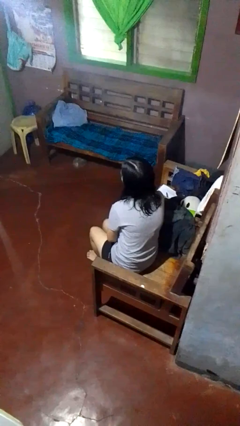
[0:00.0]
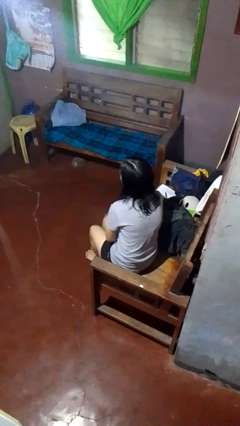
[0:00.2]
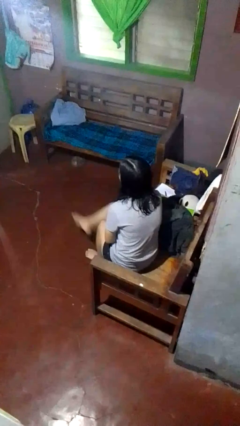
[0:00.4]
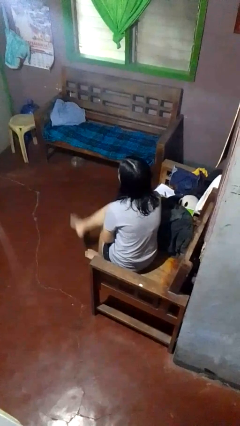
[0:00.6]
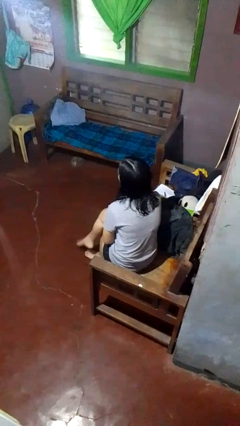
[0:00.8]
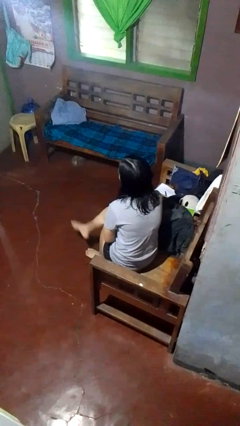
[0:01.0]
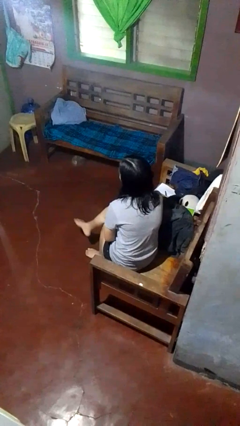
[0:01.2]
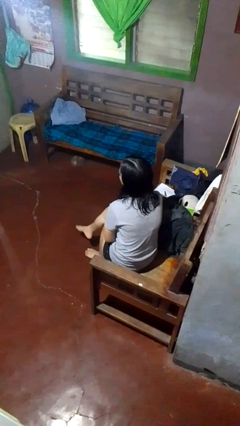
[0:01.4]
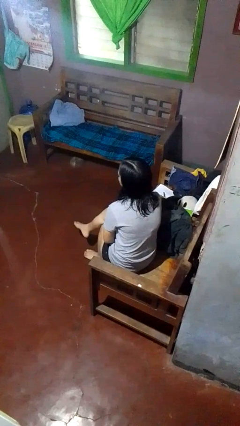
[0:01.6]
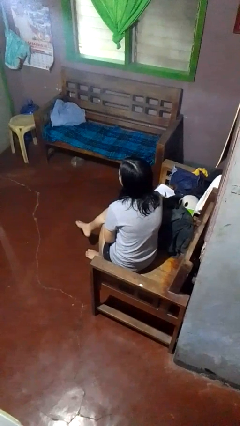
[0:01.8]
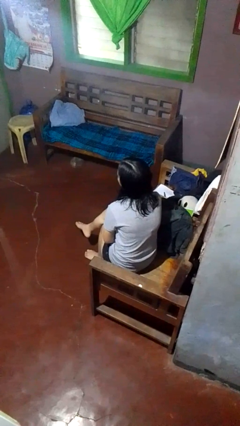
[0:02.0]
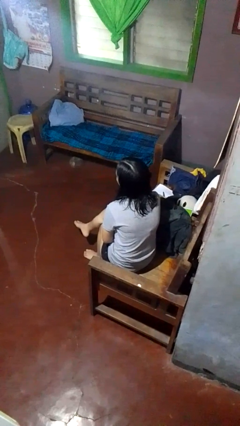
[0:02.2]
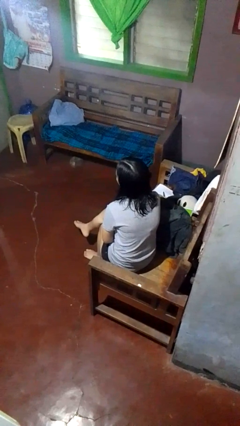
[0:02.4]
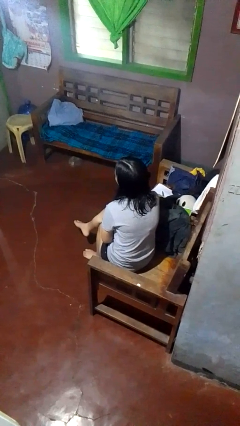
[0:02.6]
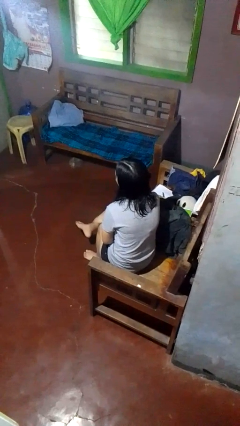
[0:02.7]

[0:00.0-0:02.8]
person crosses legs

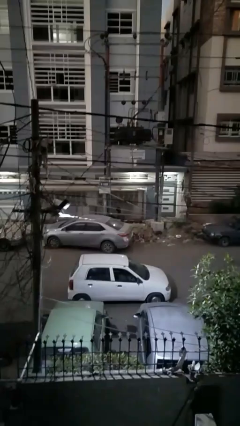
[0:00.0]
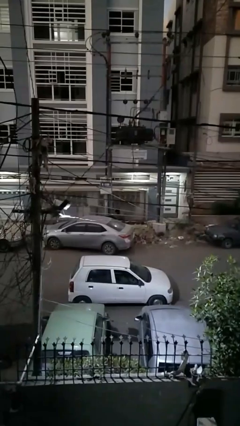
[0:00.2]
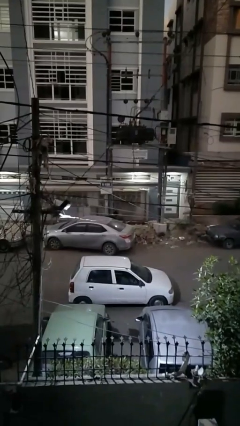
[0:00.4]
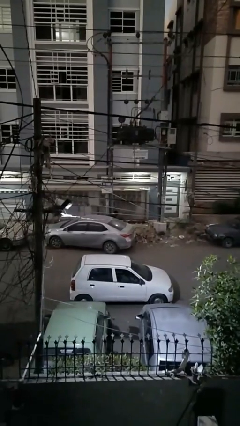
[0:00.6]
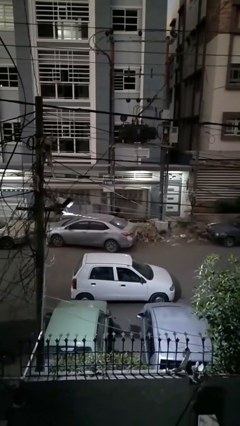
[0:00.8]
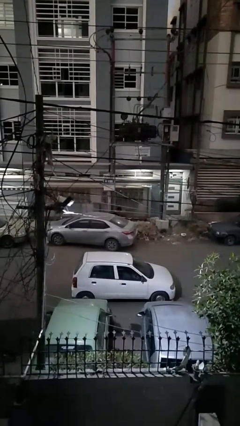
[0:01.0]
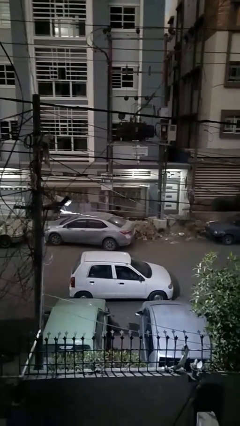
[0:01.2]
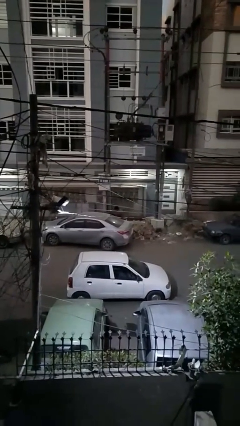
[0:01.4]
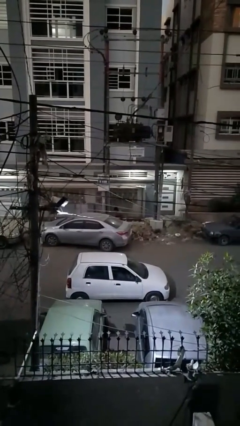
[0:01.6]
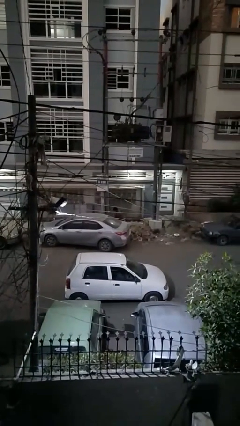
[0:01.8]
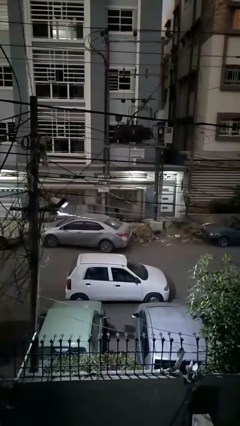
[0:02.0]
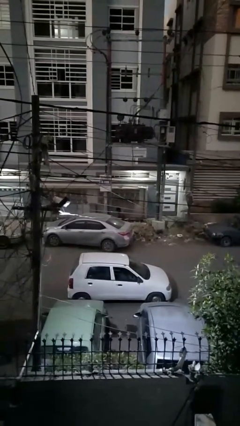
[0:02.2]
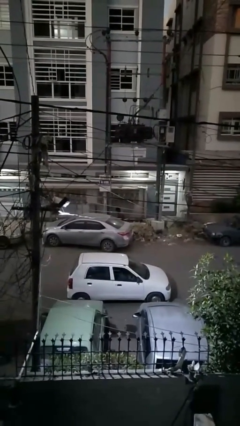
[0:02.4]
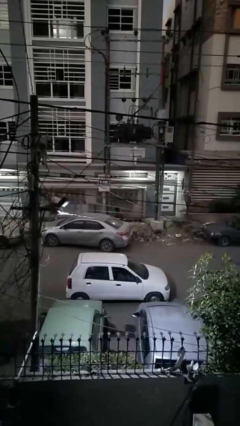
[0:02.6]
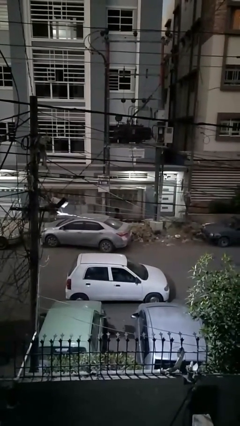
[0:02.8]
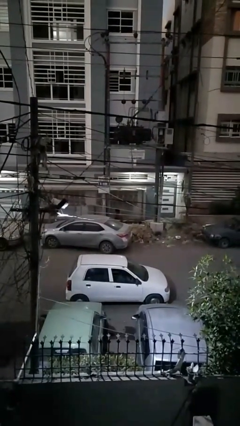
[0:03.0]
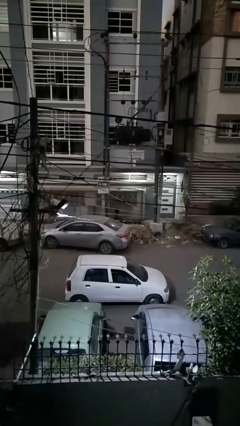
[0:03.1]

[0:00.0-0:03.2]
person unloads car

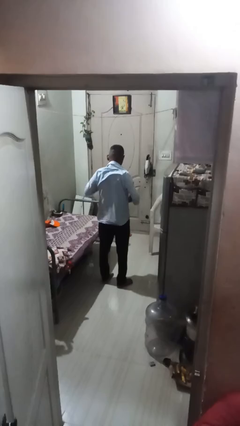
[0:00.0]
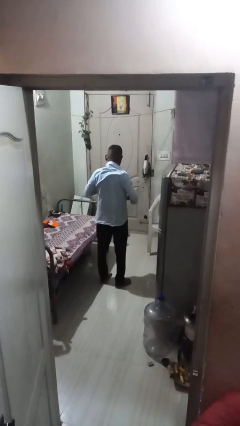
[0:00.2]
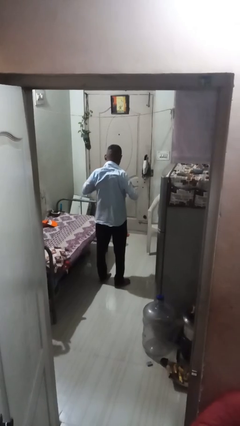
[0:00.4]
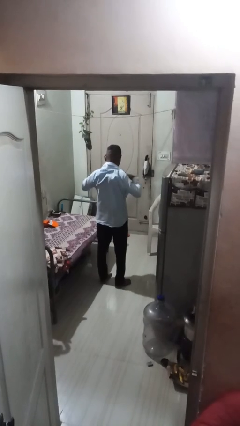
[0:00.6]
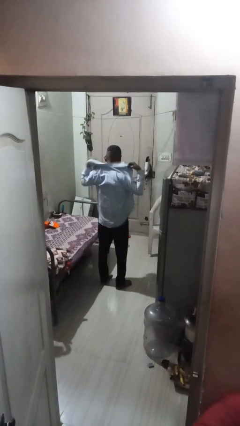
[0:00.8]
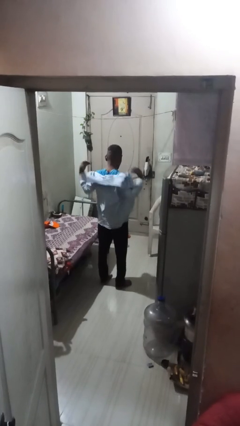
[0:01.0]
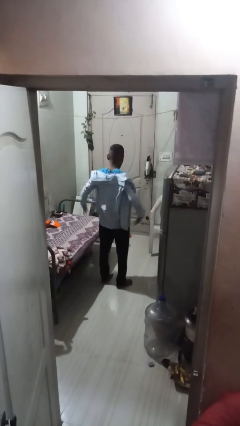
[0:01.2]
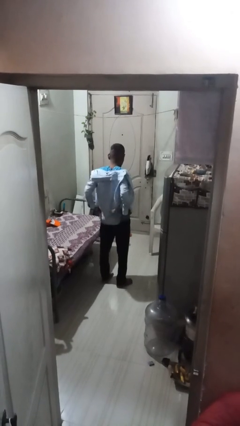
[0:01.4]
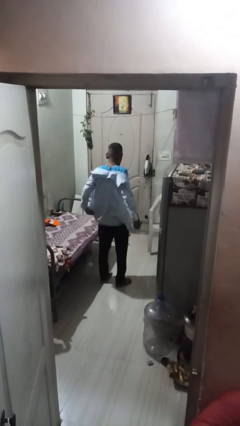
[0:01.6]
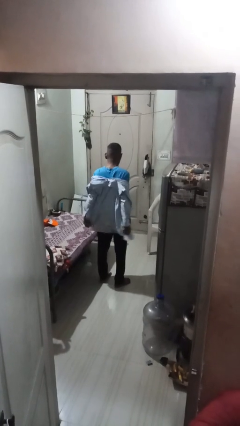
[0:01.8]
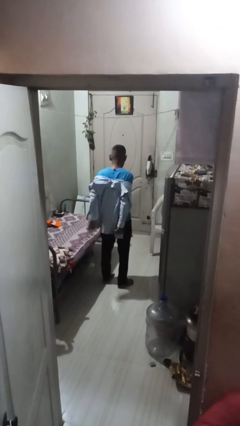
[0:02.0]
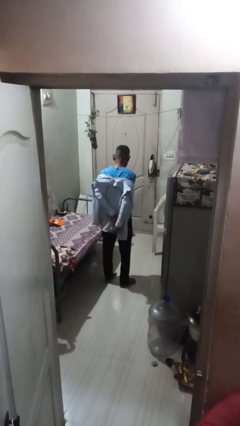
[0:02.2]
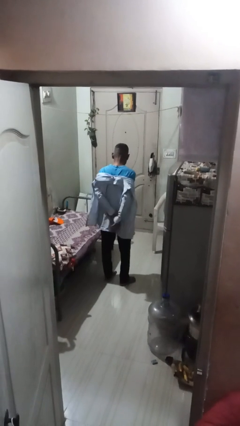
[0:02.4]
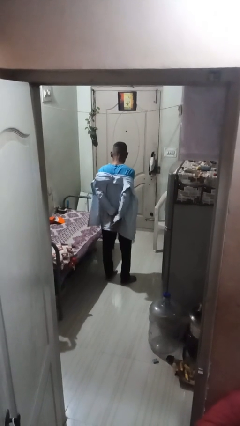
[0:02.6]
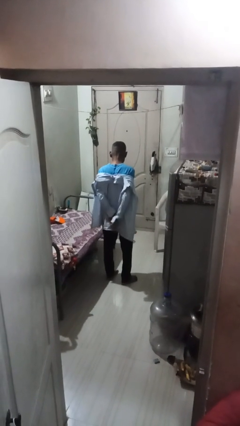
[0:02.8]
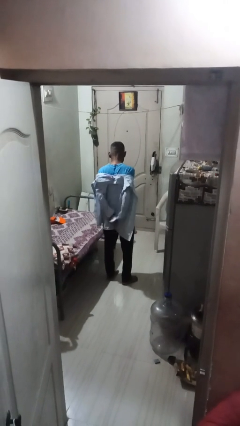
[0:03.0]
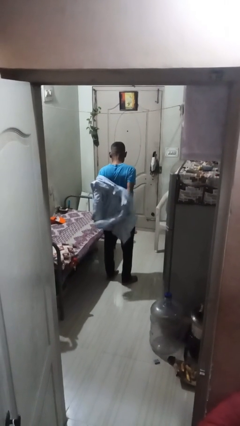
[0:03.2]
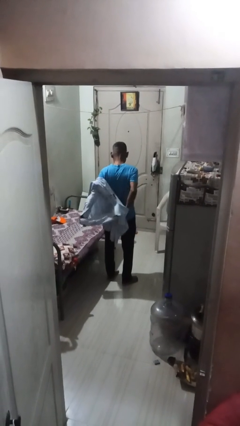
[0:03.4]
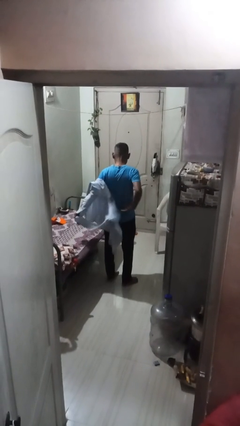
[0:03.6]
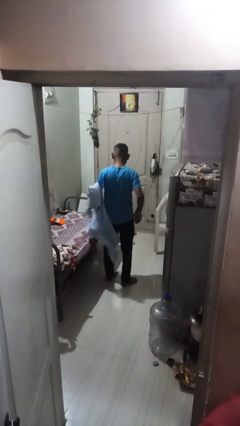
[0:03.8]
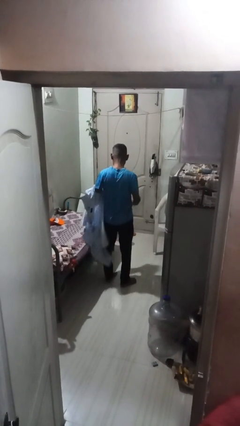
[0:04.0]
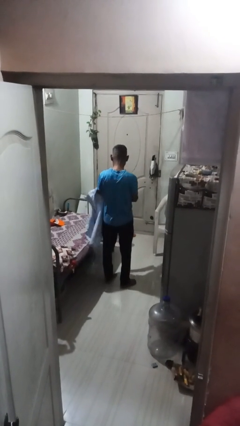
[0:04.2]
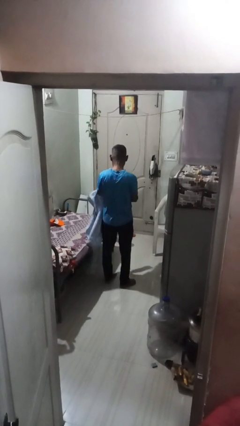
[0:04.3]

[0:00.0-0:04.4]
person takes off shirt

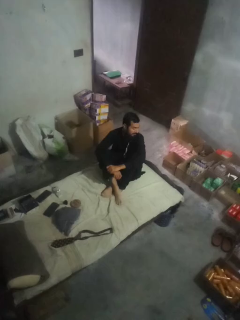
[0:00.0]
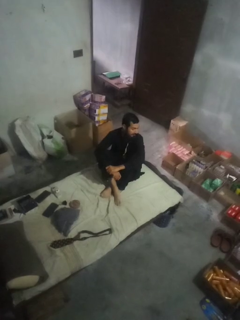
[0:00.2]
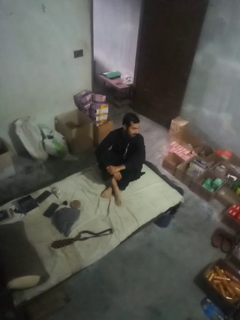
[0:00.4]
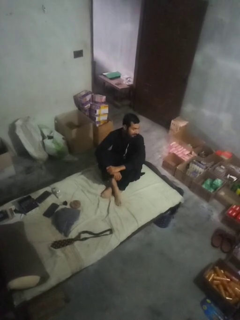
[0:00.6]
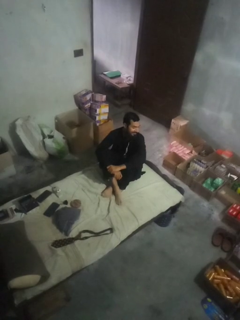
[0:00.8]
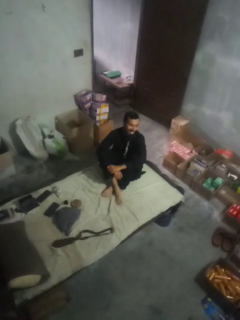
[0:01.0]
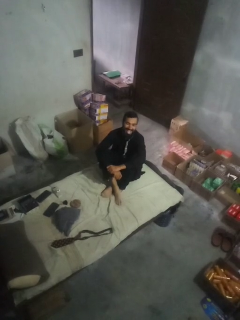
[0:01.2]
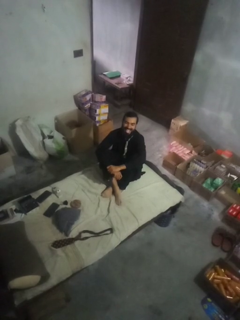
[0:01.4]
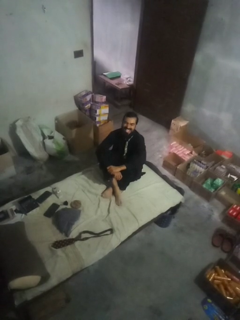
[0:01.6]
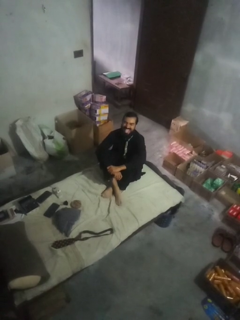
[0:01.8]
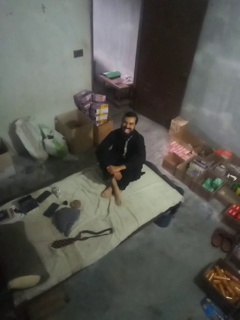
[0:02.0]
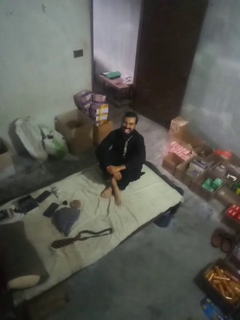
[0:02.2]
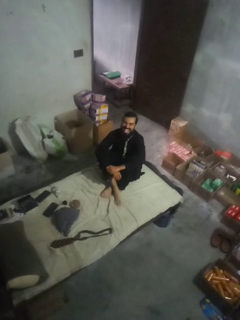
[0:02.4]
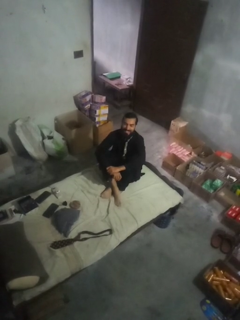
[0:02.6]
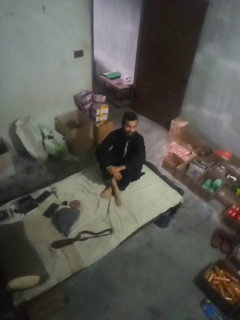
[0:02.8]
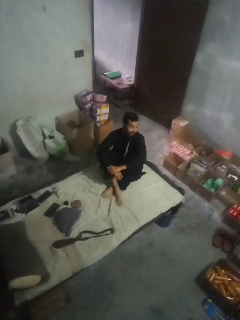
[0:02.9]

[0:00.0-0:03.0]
person sticks out tongue

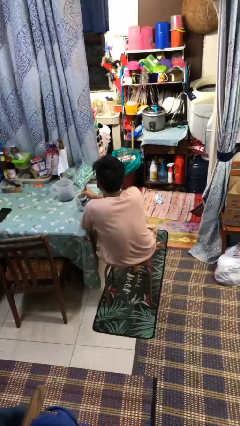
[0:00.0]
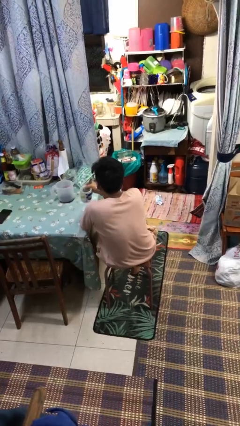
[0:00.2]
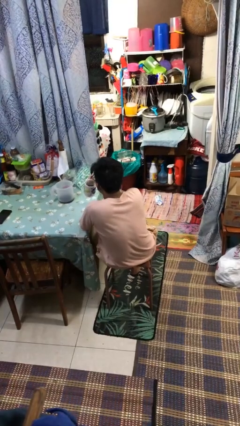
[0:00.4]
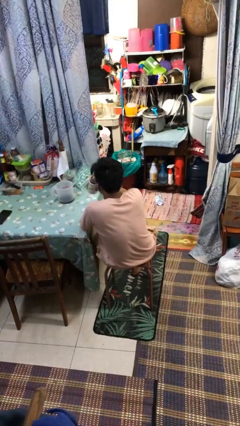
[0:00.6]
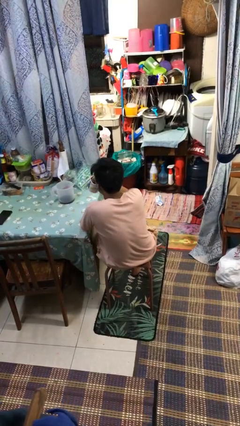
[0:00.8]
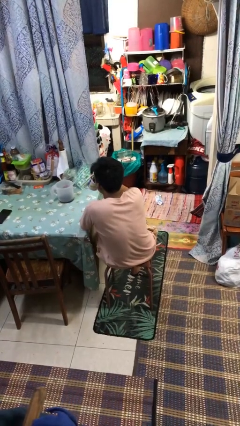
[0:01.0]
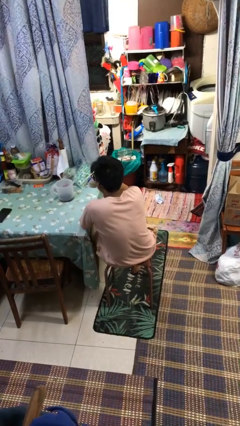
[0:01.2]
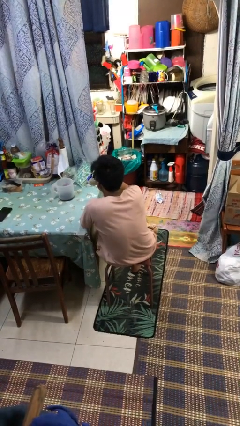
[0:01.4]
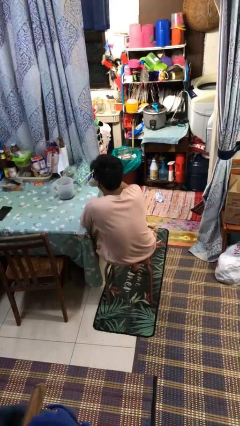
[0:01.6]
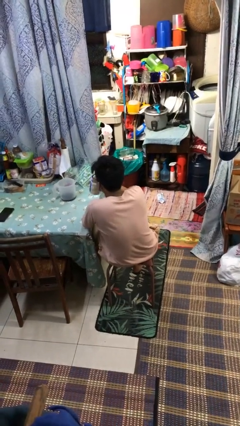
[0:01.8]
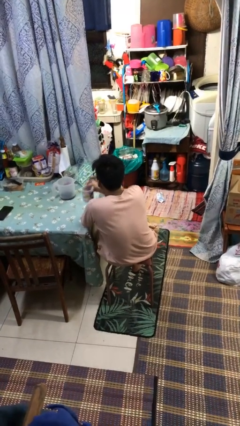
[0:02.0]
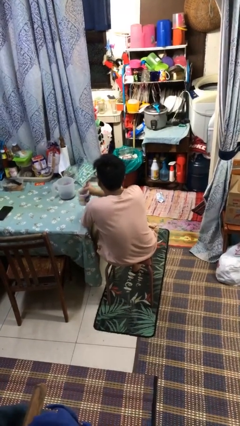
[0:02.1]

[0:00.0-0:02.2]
person drinks from mug

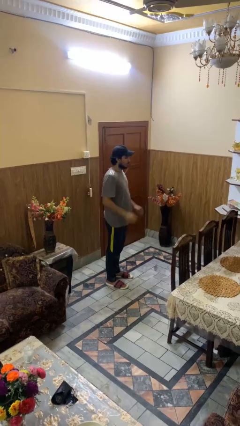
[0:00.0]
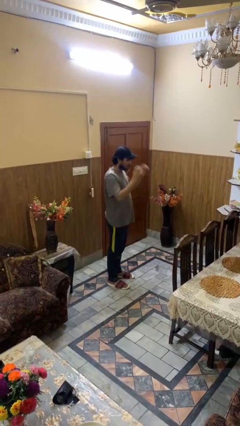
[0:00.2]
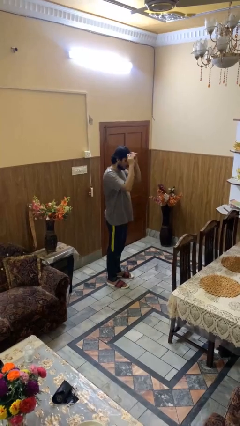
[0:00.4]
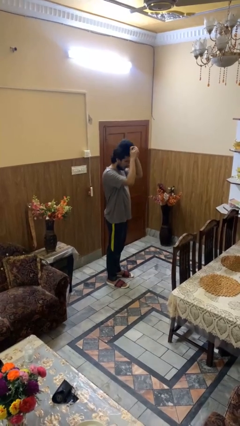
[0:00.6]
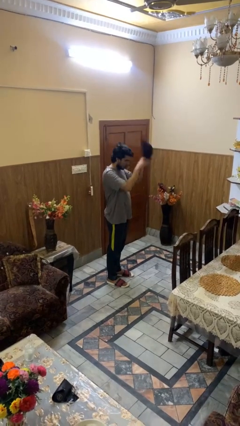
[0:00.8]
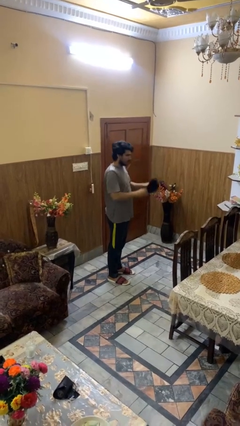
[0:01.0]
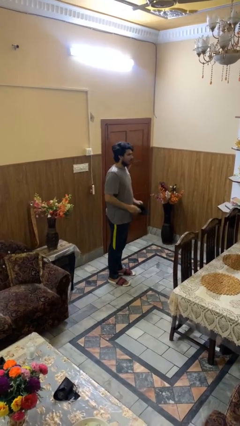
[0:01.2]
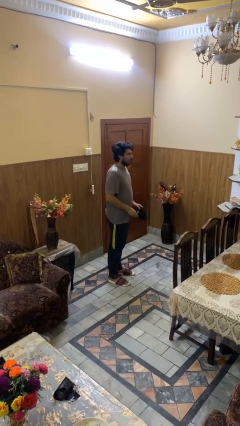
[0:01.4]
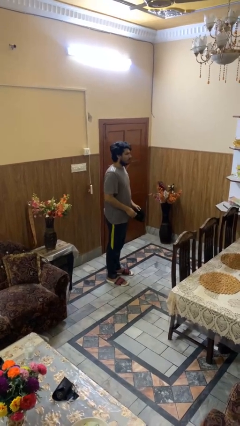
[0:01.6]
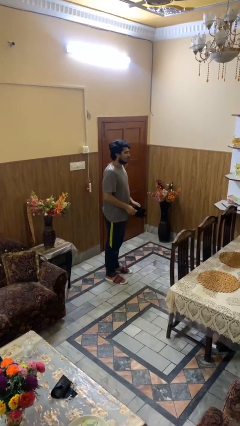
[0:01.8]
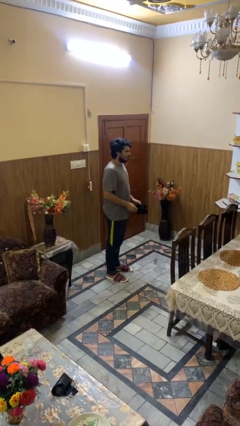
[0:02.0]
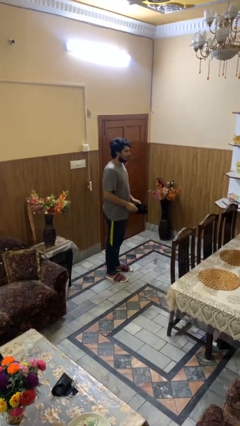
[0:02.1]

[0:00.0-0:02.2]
person takes off hat

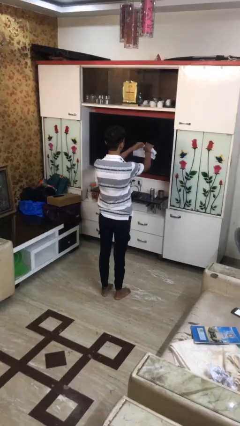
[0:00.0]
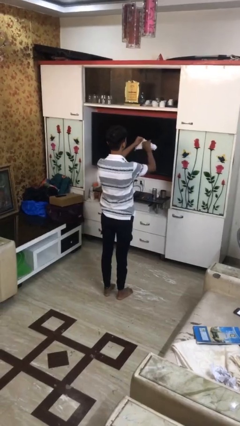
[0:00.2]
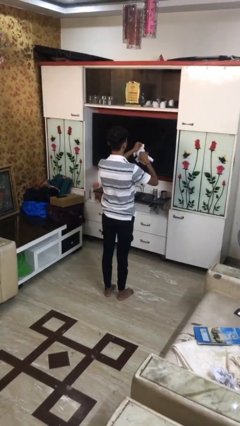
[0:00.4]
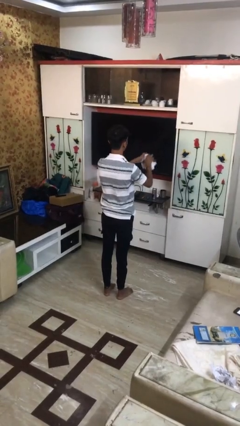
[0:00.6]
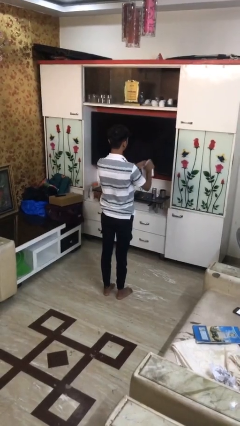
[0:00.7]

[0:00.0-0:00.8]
person tears paper
